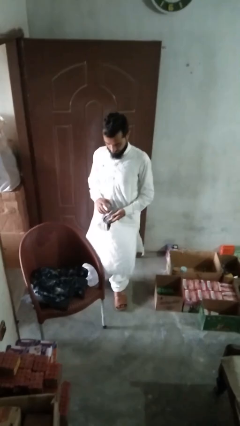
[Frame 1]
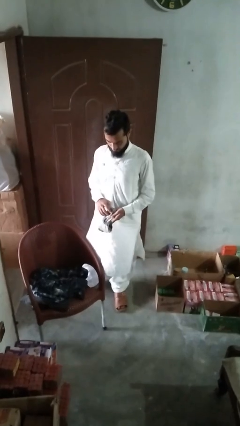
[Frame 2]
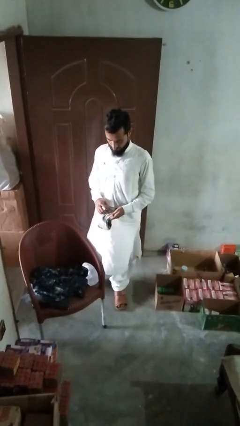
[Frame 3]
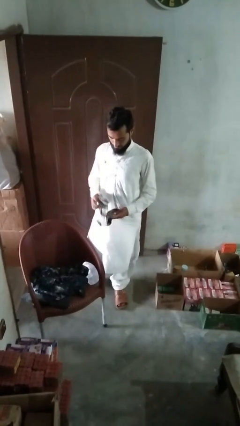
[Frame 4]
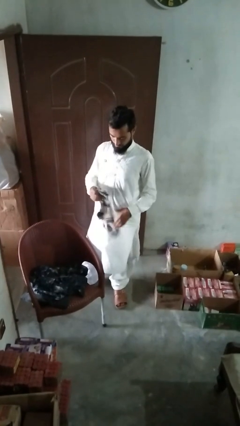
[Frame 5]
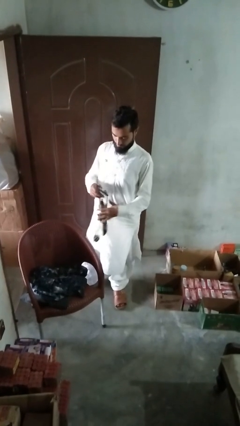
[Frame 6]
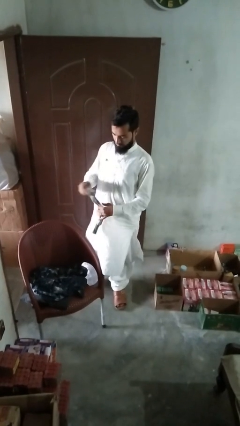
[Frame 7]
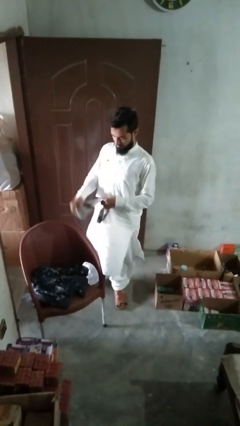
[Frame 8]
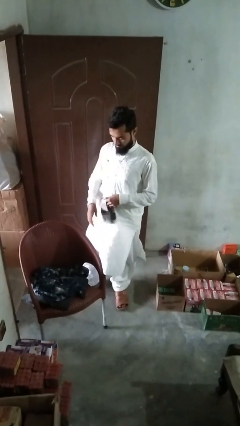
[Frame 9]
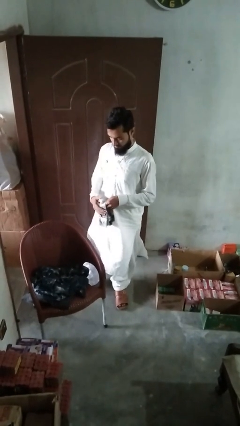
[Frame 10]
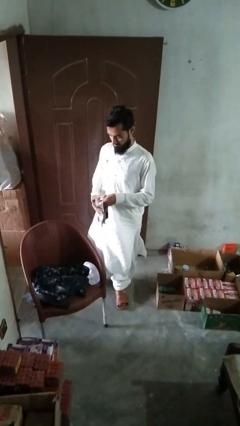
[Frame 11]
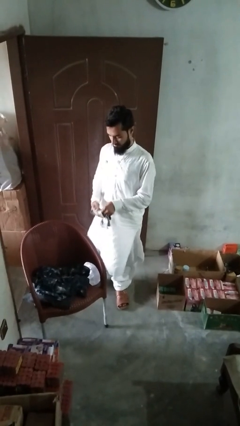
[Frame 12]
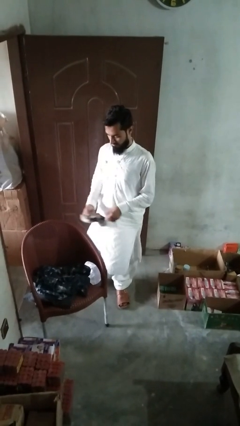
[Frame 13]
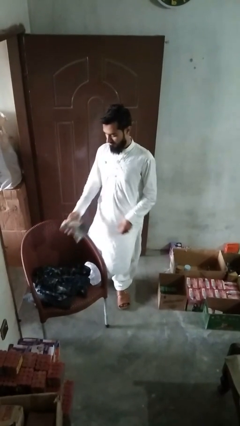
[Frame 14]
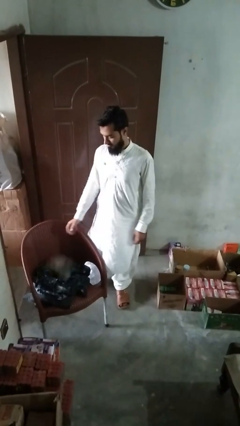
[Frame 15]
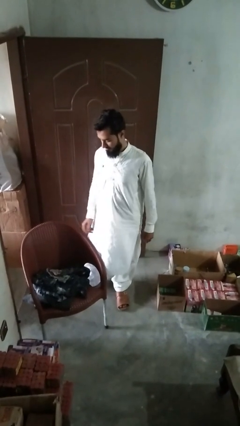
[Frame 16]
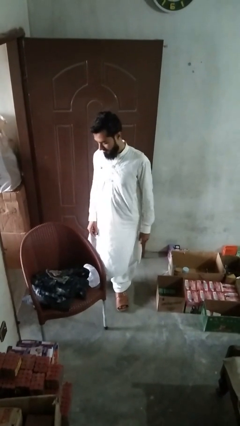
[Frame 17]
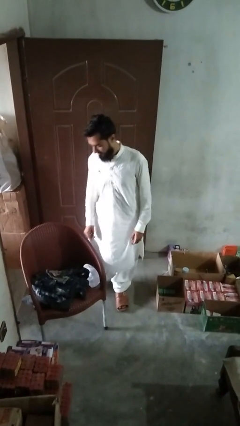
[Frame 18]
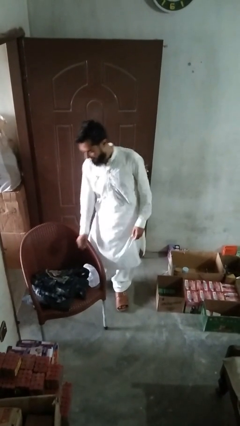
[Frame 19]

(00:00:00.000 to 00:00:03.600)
person folds socks

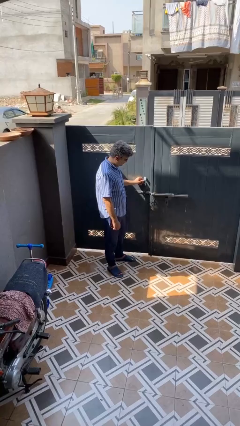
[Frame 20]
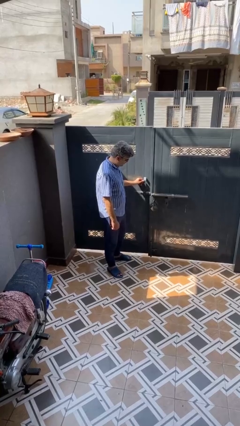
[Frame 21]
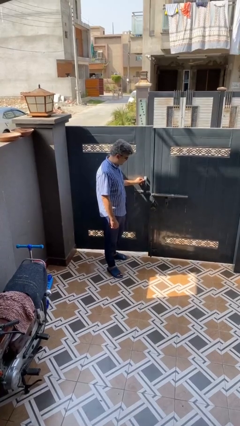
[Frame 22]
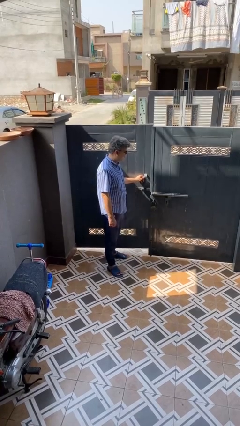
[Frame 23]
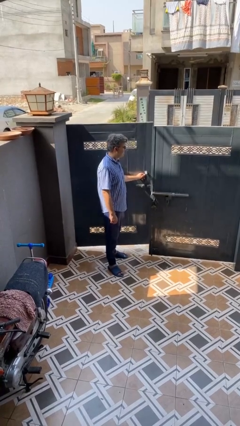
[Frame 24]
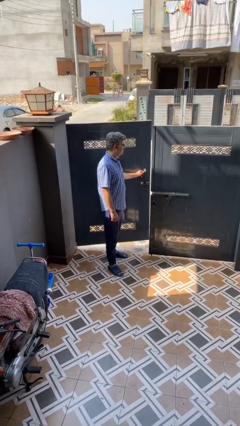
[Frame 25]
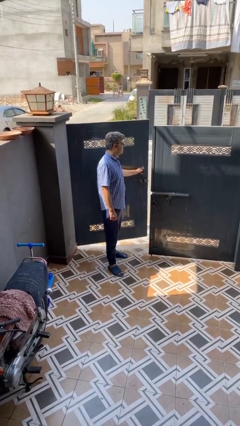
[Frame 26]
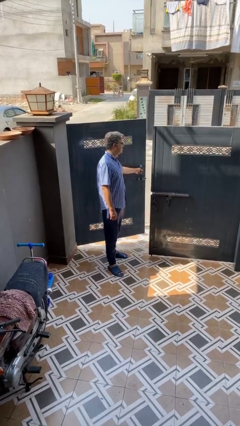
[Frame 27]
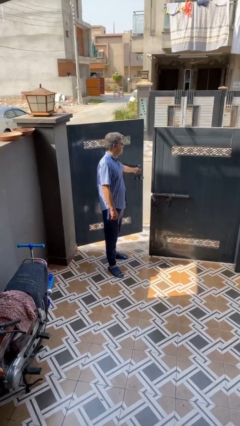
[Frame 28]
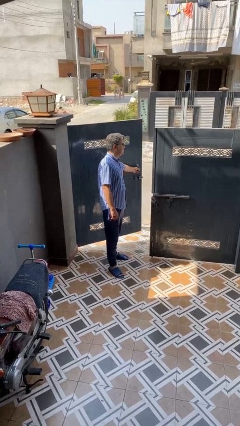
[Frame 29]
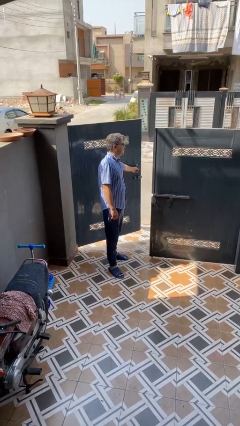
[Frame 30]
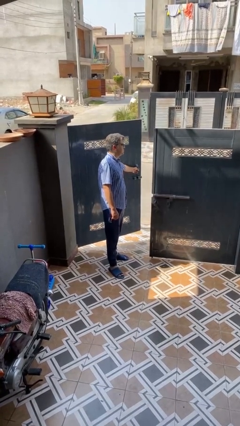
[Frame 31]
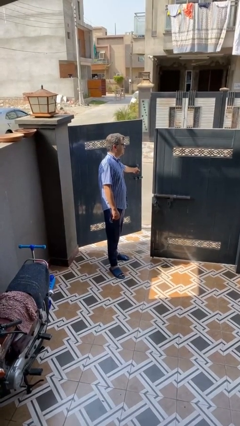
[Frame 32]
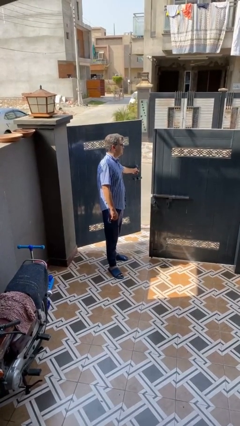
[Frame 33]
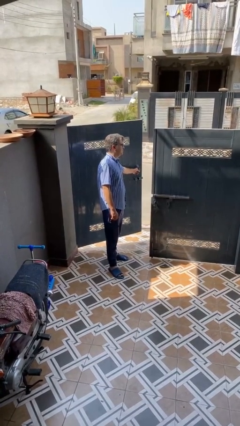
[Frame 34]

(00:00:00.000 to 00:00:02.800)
person opens gate

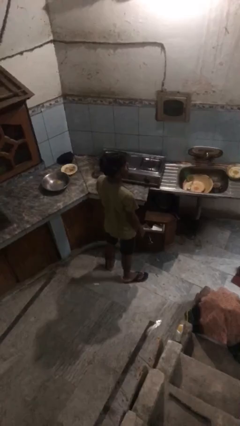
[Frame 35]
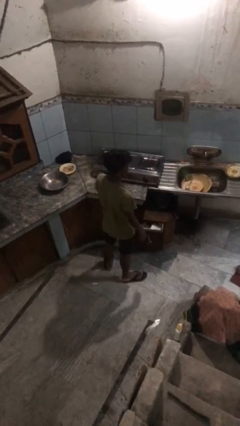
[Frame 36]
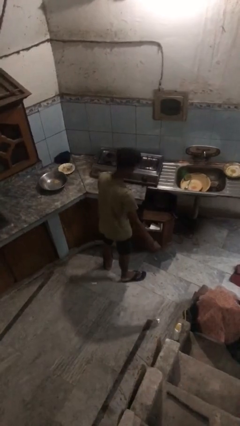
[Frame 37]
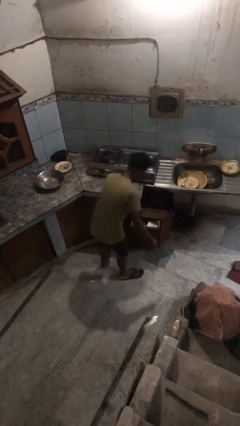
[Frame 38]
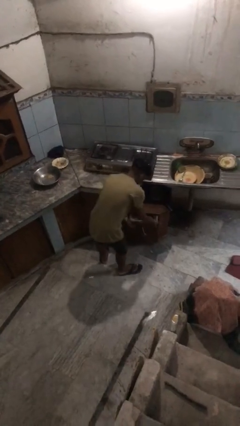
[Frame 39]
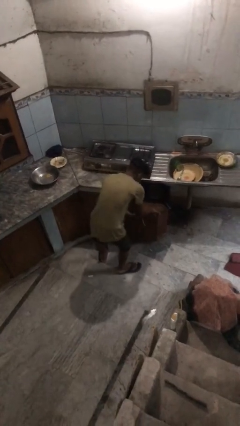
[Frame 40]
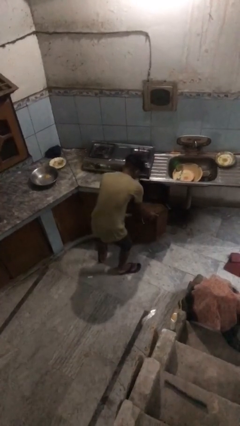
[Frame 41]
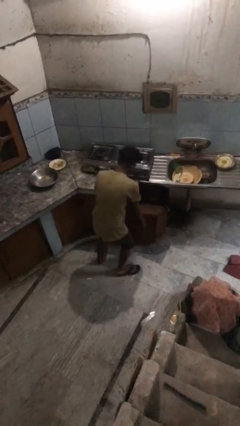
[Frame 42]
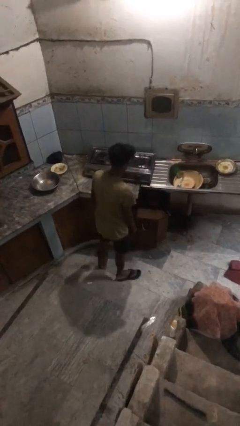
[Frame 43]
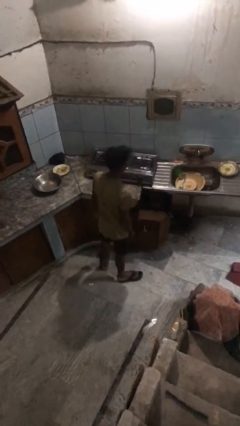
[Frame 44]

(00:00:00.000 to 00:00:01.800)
person closes kitchen drawer

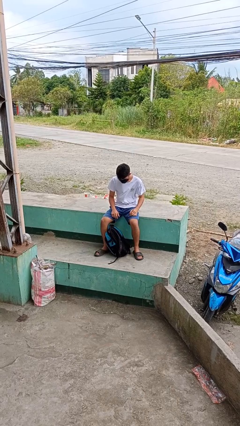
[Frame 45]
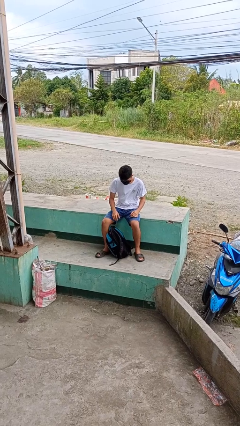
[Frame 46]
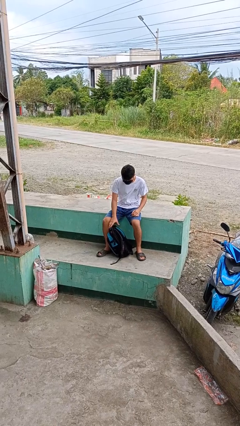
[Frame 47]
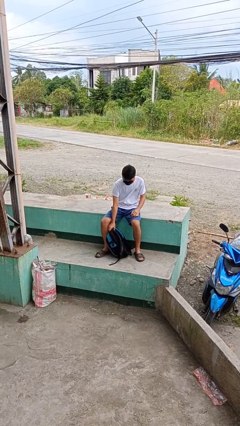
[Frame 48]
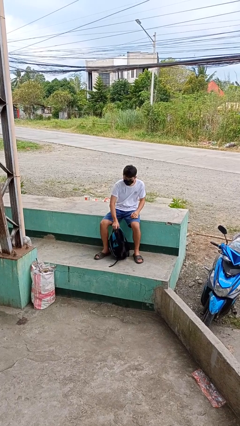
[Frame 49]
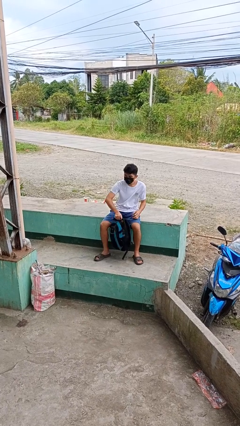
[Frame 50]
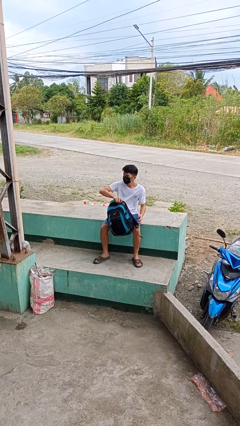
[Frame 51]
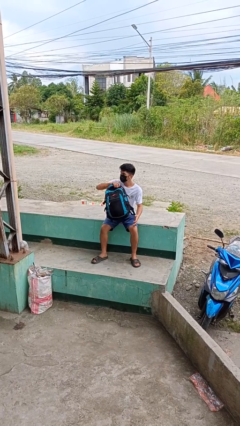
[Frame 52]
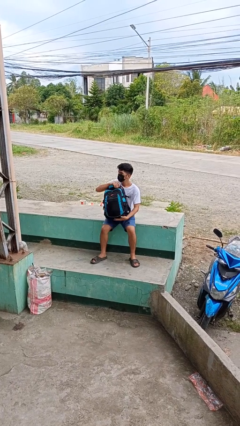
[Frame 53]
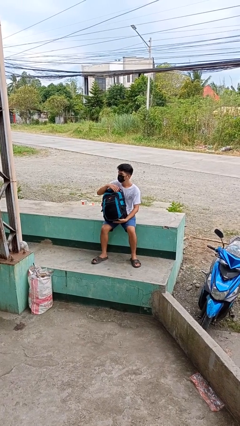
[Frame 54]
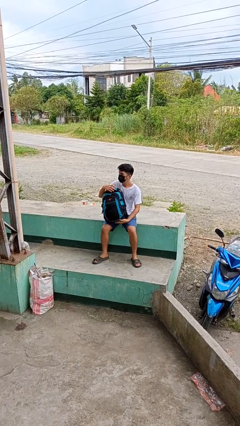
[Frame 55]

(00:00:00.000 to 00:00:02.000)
person picks up object from floor

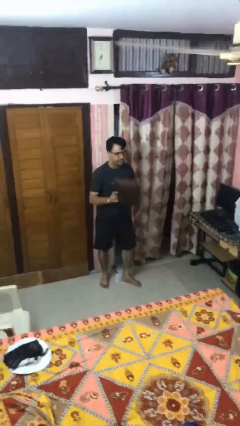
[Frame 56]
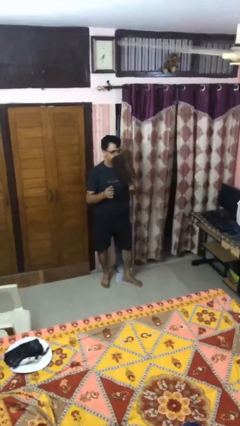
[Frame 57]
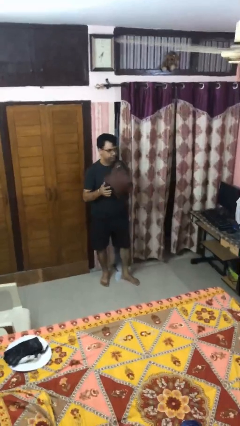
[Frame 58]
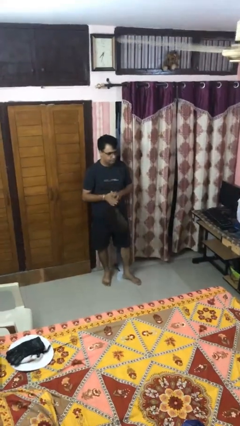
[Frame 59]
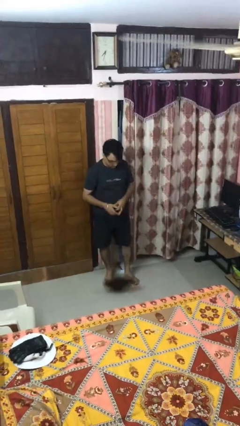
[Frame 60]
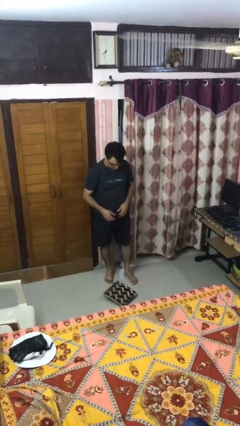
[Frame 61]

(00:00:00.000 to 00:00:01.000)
person drops object

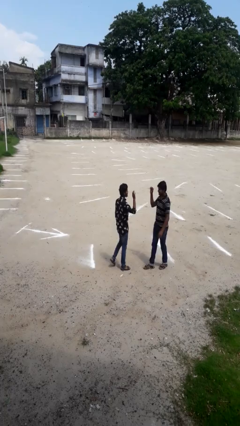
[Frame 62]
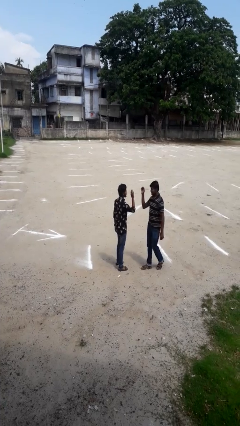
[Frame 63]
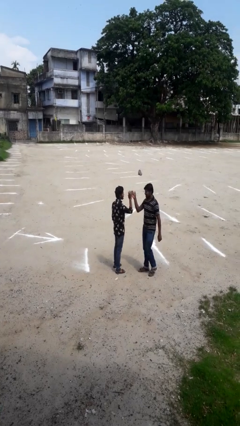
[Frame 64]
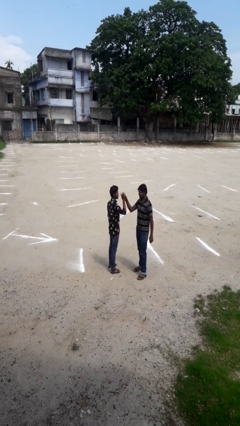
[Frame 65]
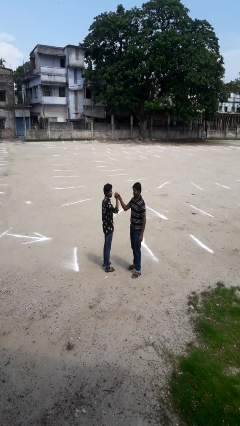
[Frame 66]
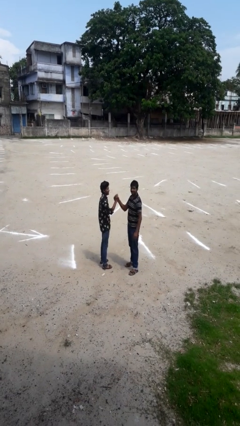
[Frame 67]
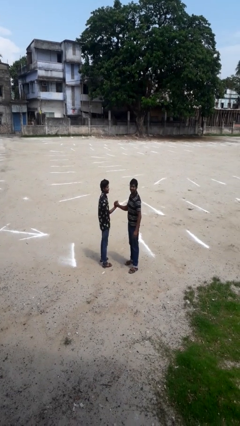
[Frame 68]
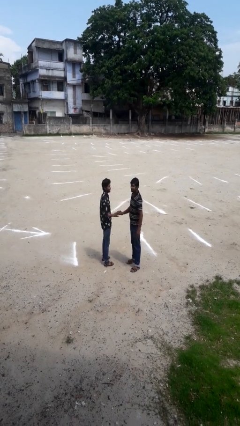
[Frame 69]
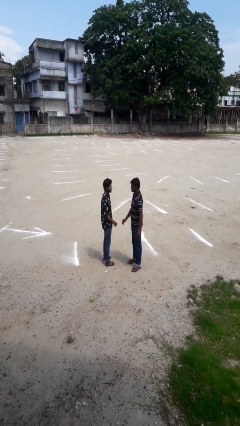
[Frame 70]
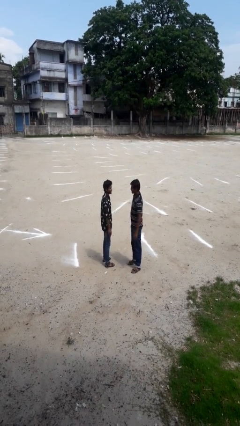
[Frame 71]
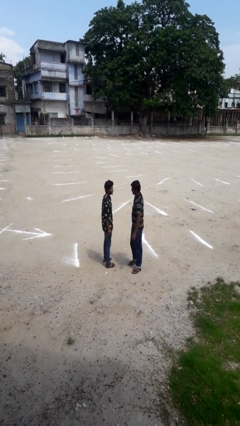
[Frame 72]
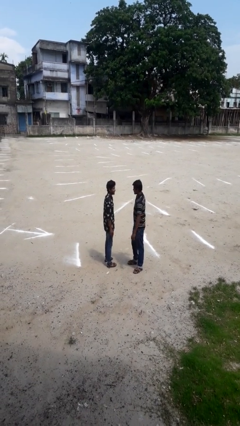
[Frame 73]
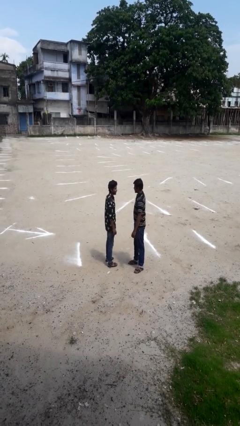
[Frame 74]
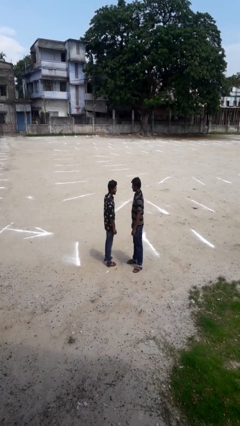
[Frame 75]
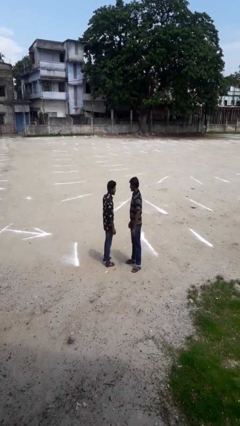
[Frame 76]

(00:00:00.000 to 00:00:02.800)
person highfives hand

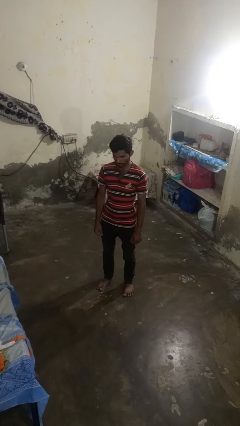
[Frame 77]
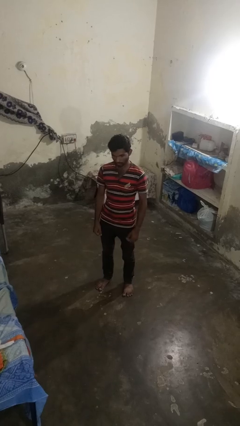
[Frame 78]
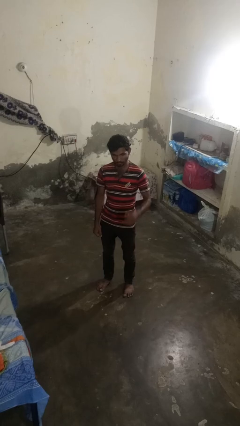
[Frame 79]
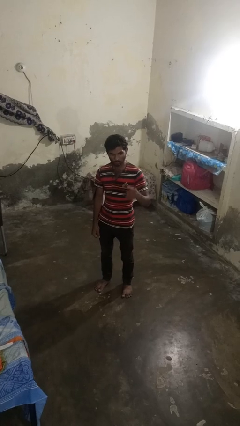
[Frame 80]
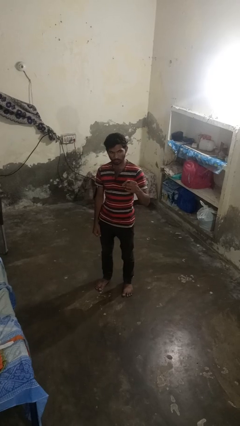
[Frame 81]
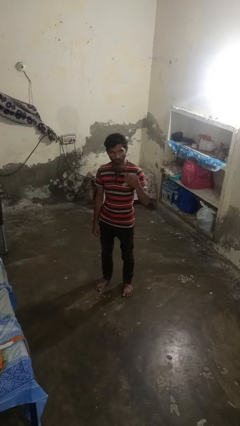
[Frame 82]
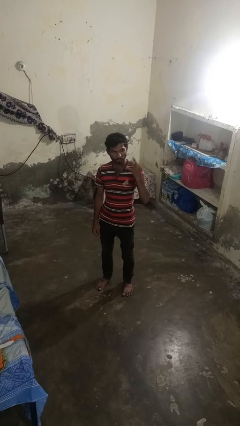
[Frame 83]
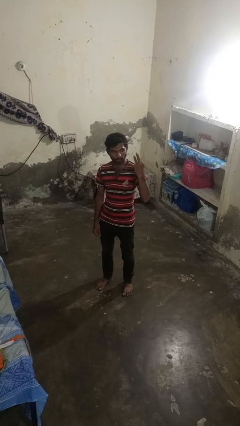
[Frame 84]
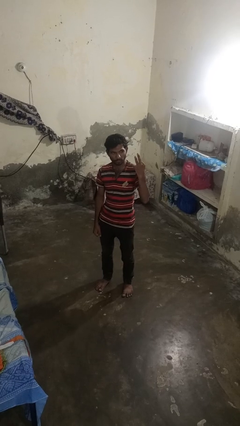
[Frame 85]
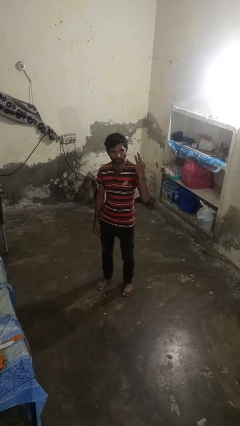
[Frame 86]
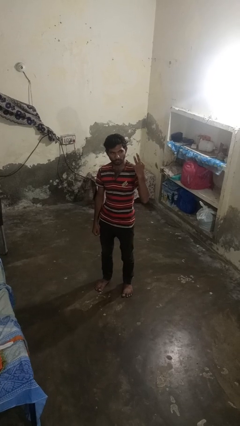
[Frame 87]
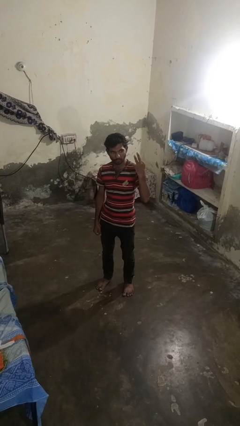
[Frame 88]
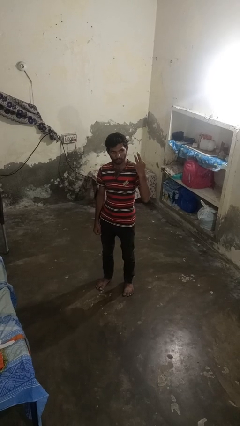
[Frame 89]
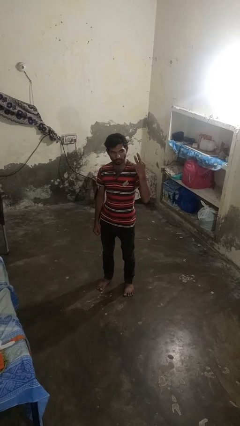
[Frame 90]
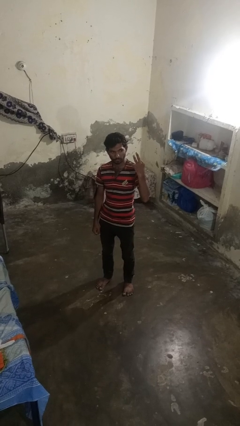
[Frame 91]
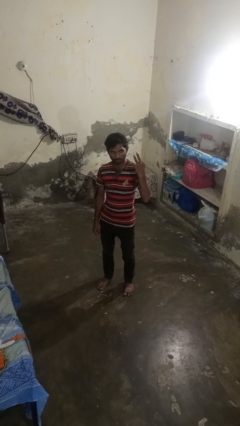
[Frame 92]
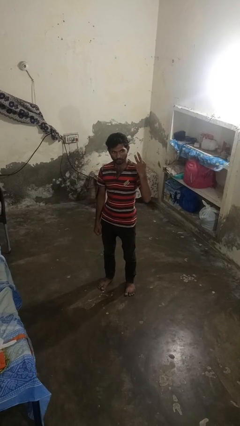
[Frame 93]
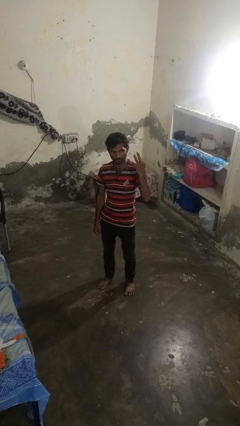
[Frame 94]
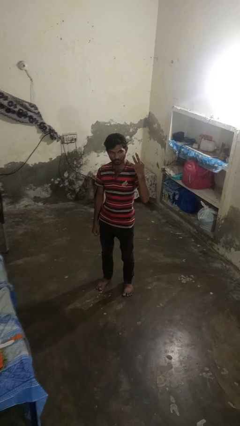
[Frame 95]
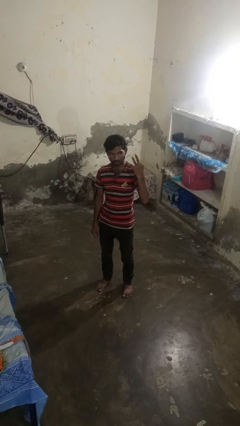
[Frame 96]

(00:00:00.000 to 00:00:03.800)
person gestures number three
